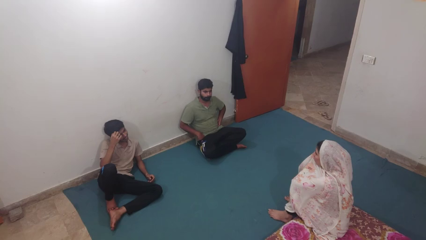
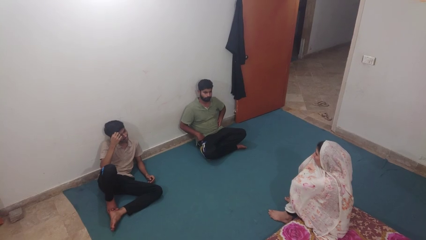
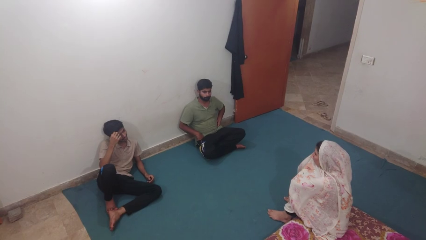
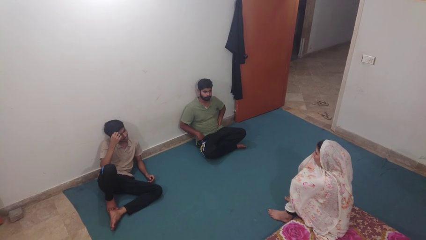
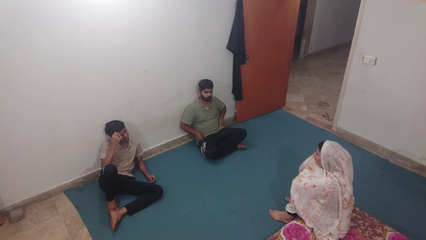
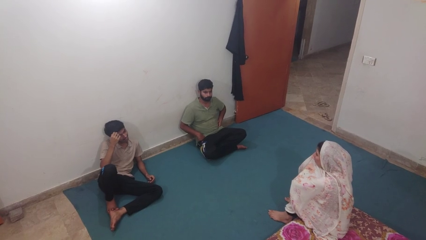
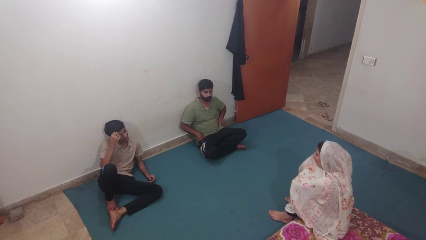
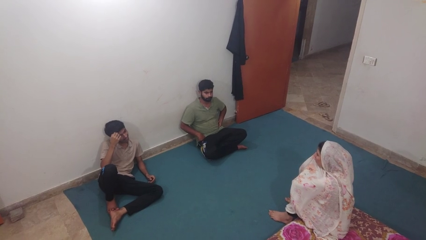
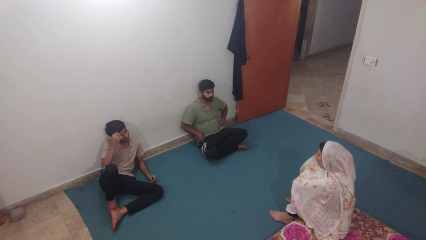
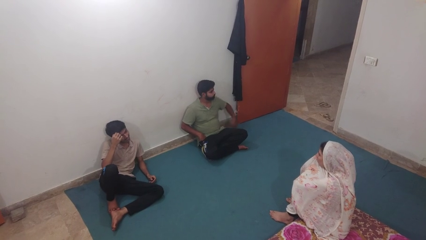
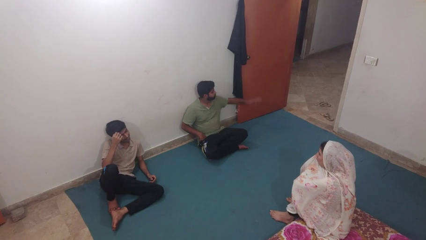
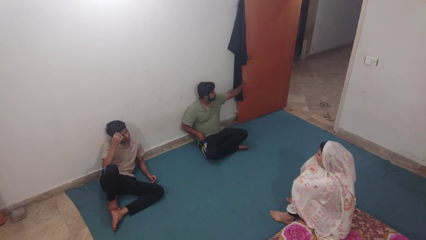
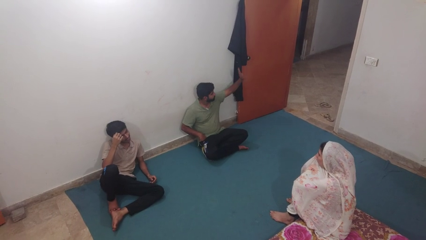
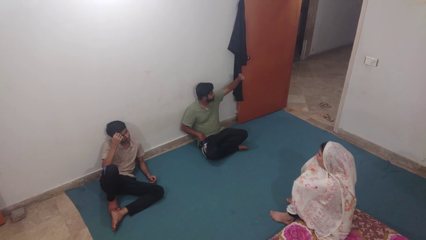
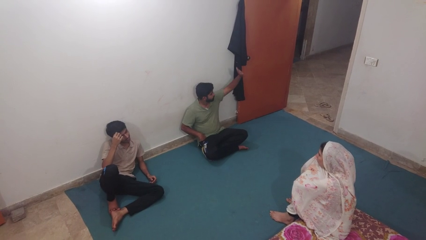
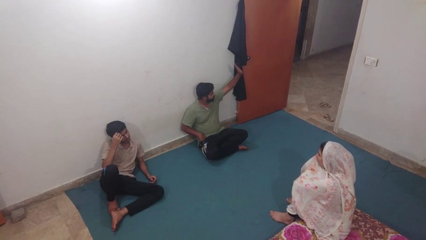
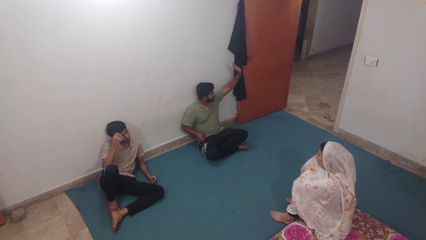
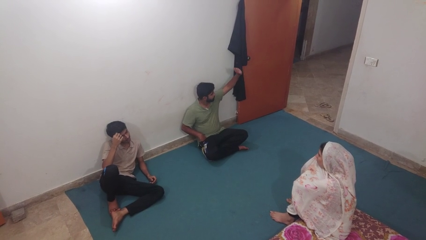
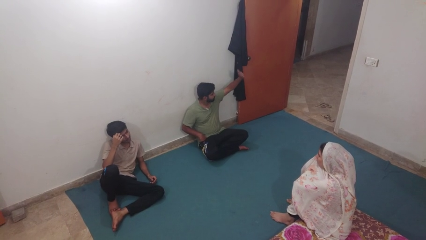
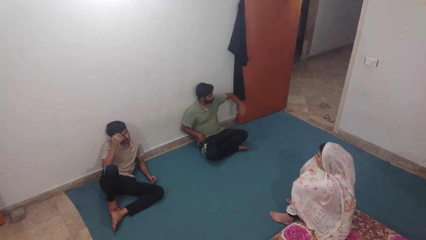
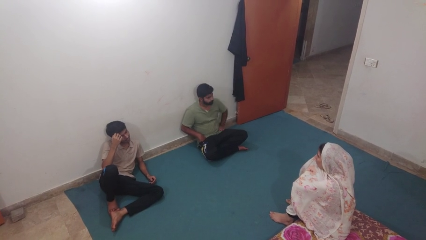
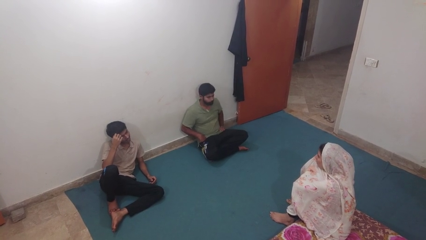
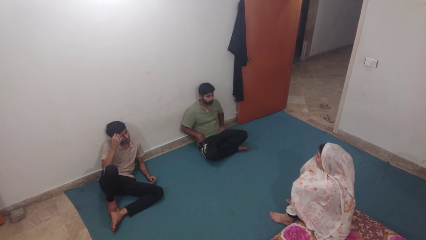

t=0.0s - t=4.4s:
person waves at person

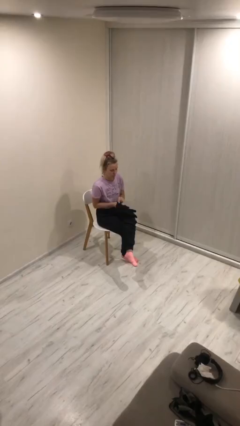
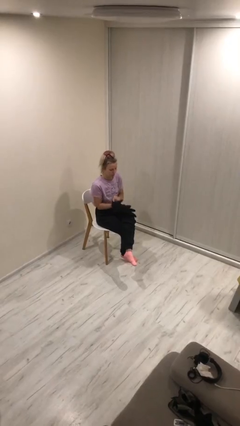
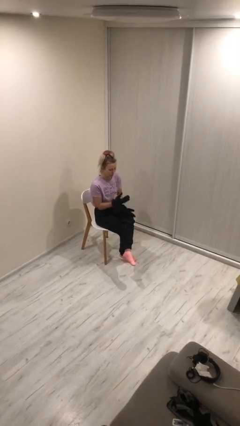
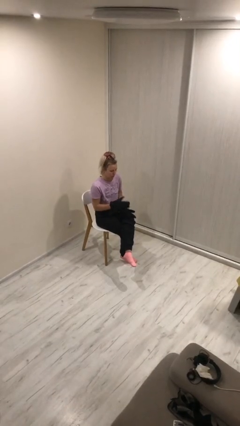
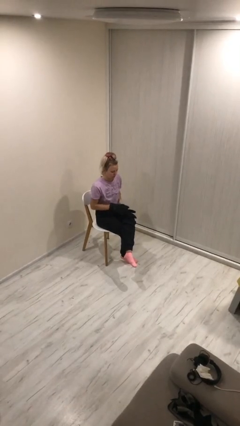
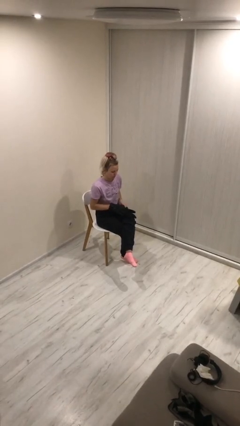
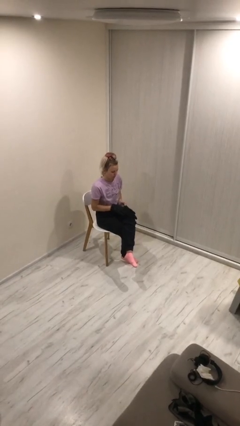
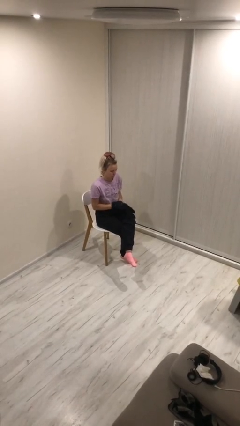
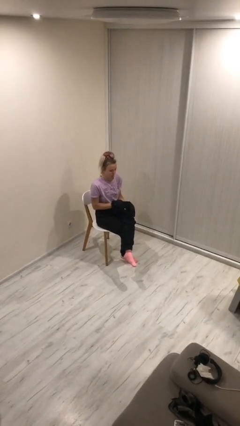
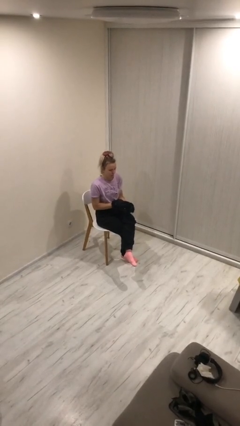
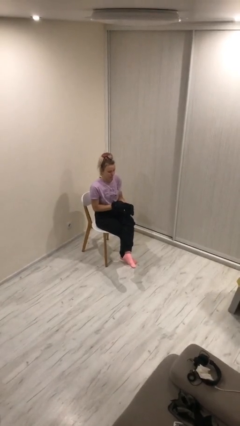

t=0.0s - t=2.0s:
person puts on gloves

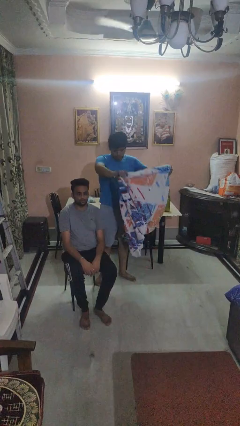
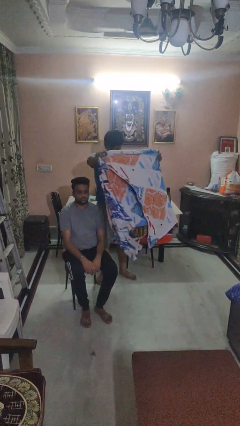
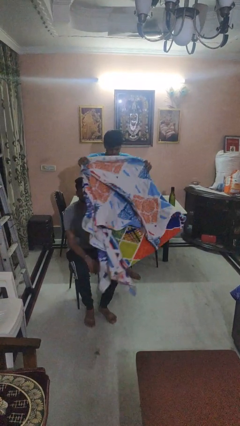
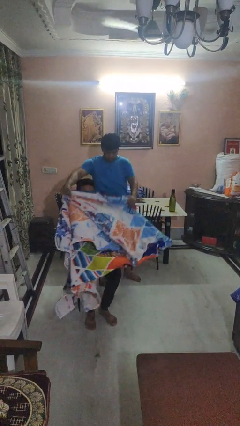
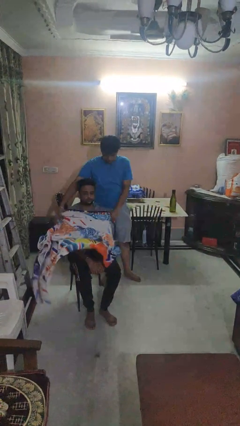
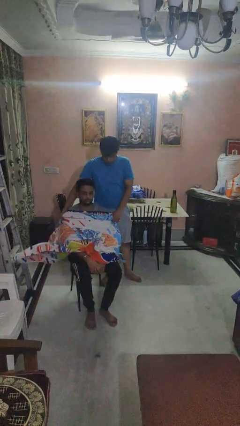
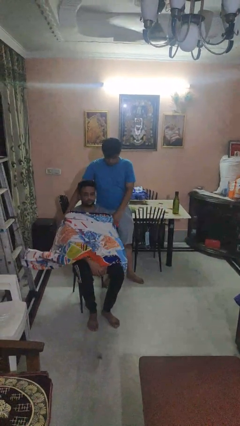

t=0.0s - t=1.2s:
person covers friend with blanket

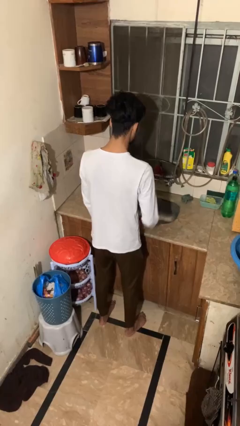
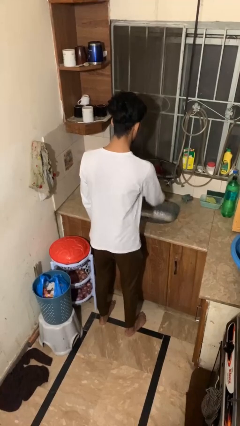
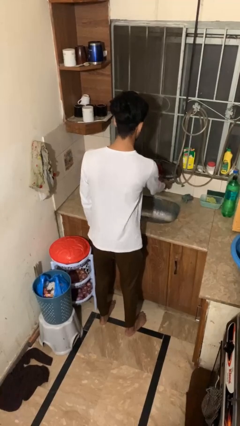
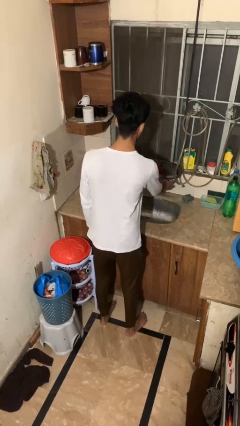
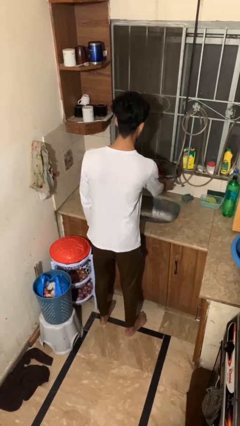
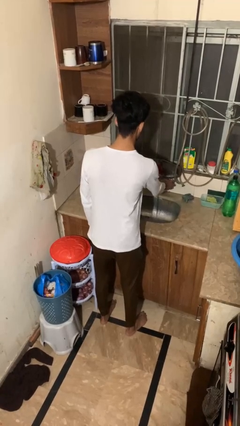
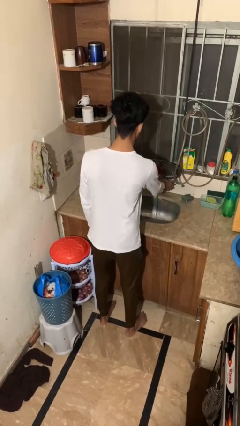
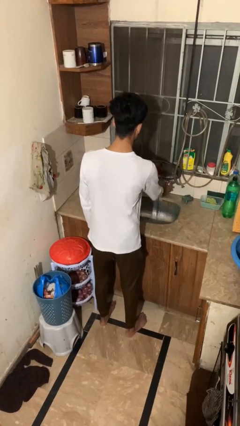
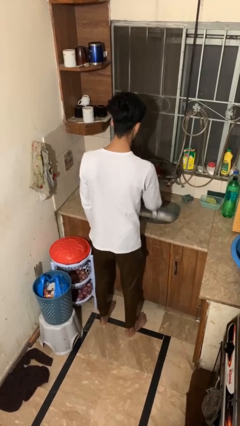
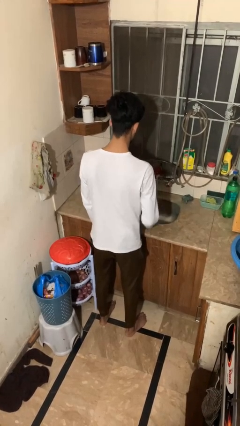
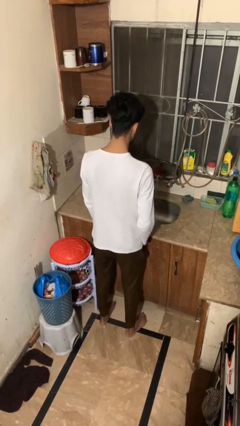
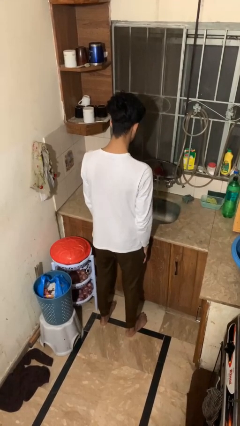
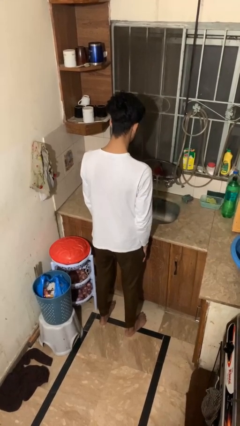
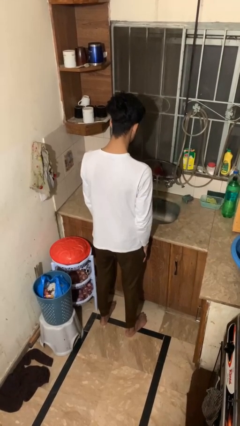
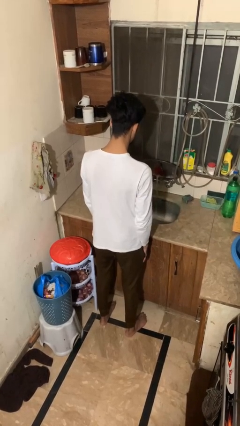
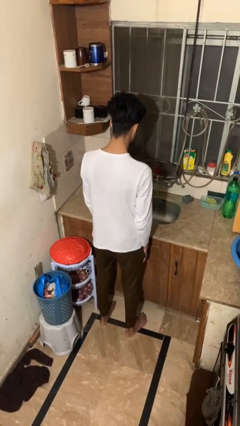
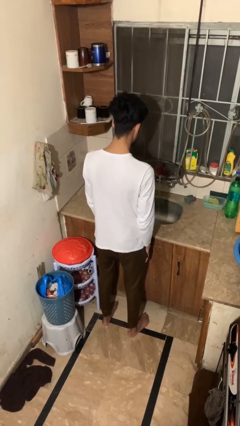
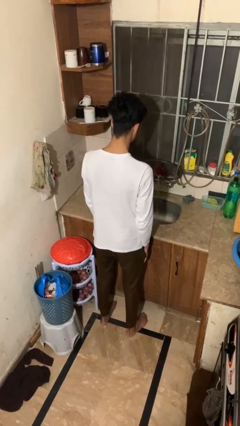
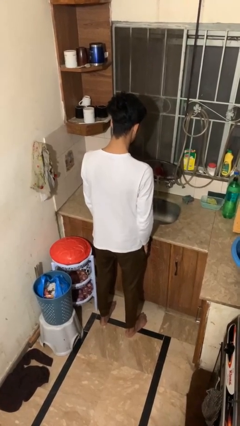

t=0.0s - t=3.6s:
person turns on faucet

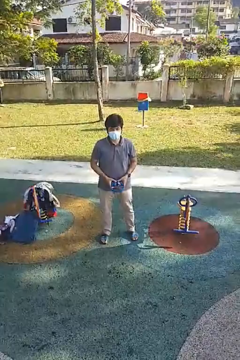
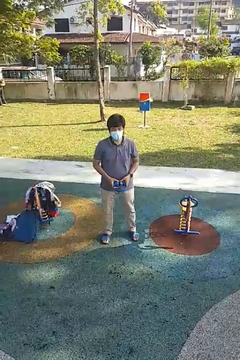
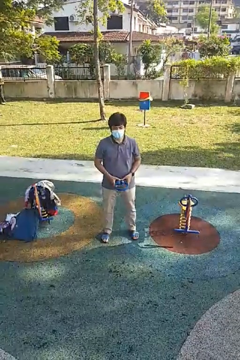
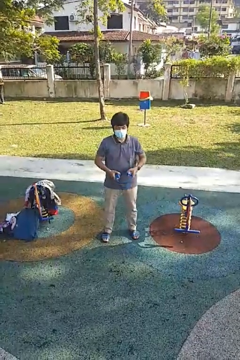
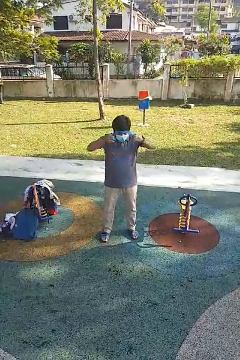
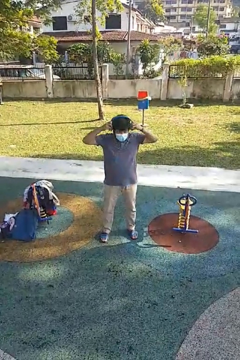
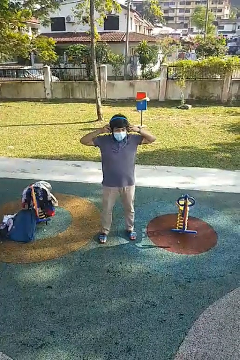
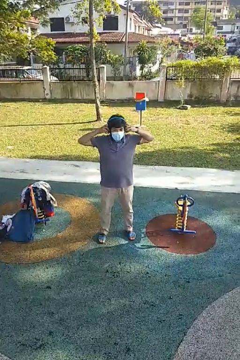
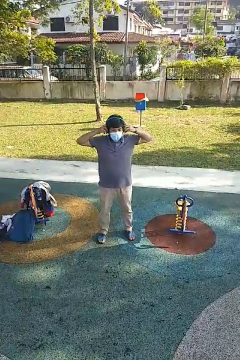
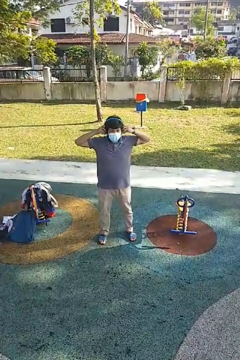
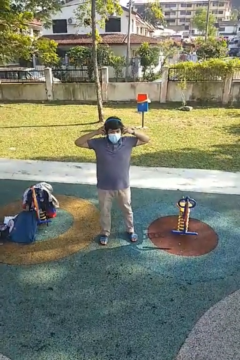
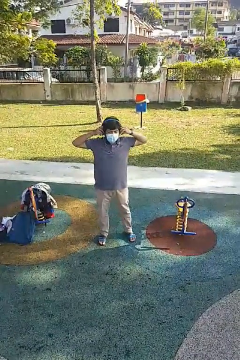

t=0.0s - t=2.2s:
person puts on headphones

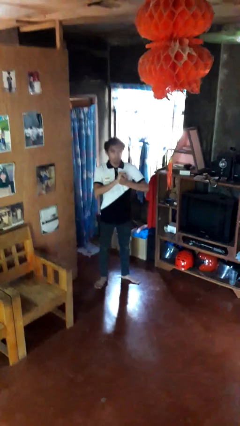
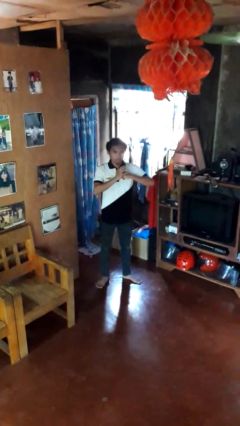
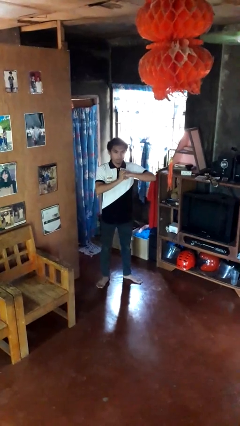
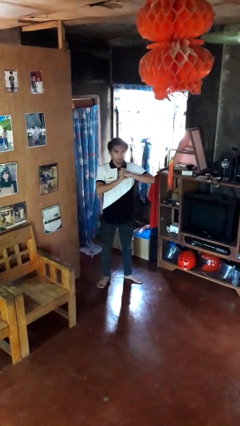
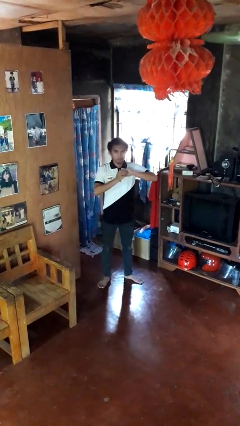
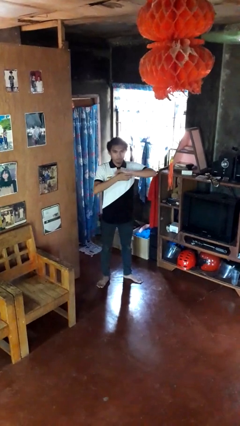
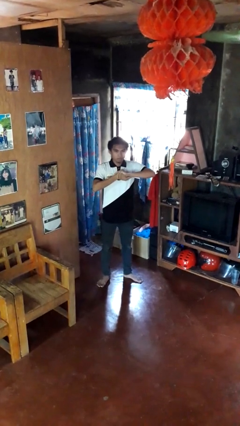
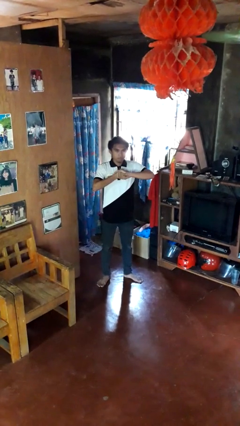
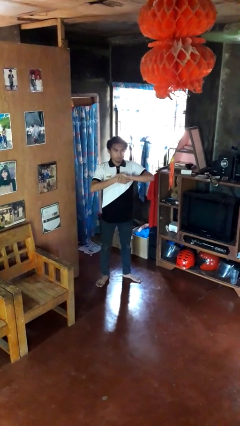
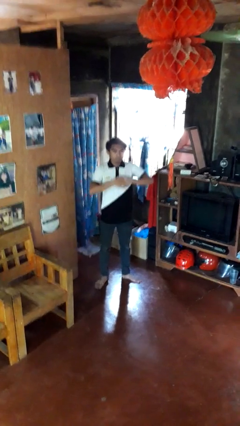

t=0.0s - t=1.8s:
person cracks knuckles

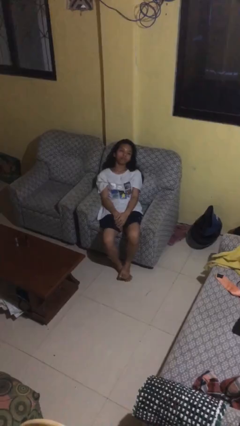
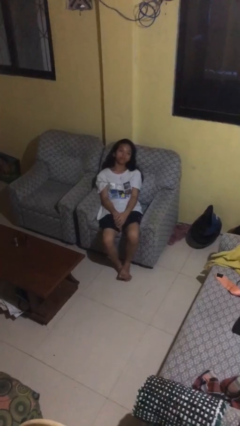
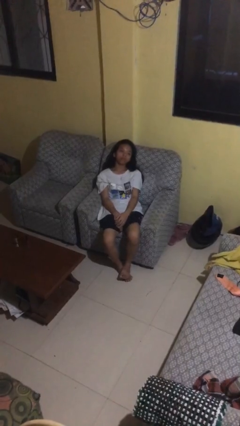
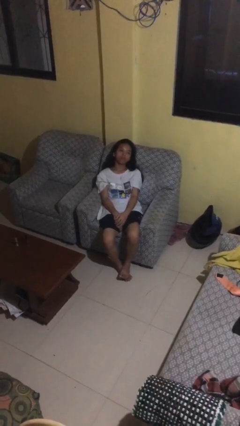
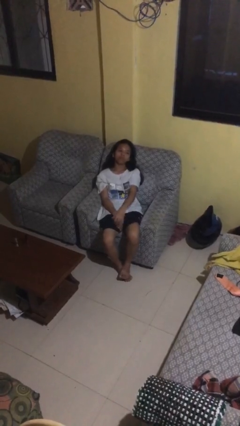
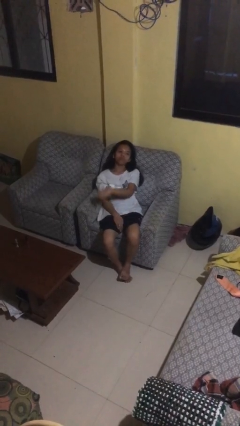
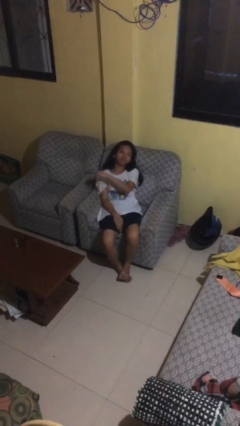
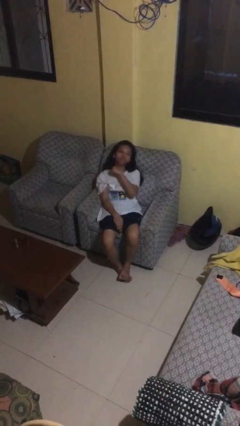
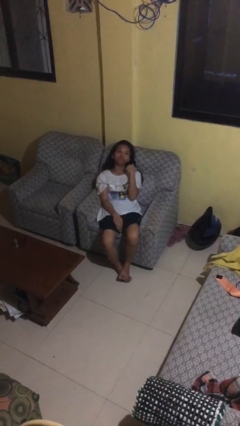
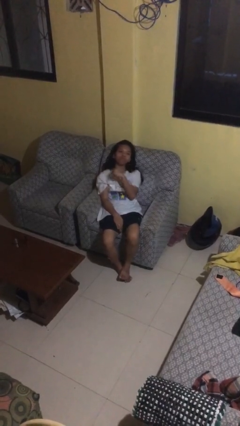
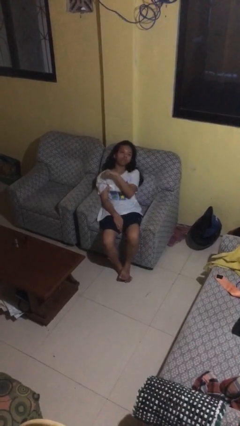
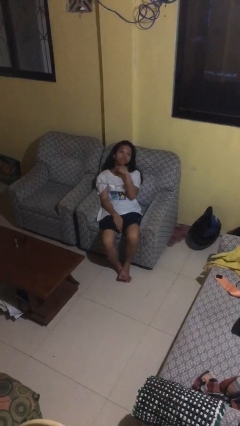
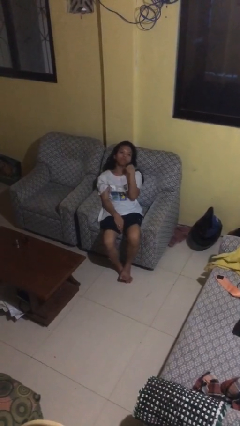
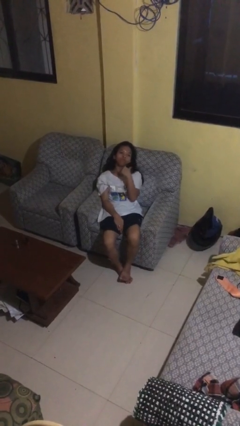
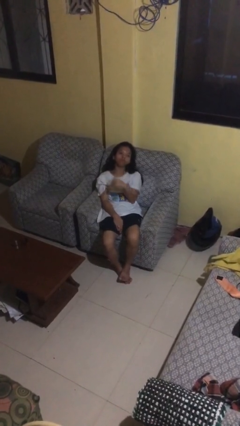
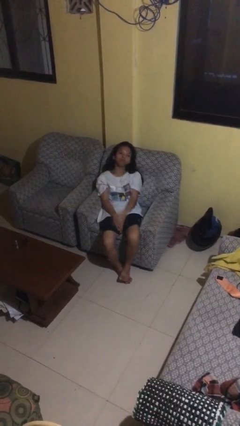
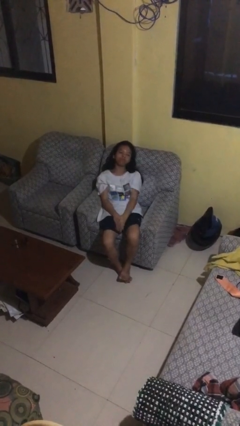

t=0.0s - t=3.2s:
person gestures cut
